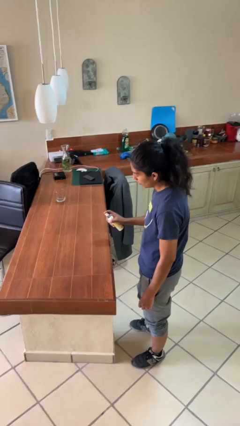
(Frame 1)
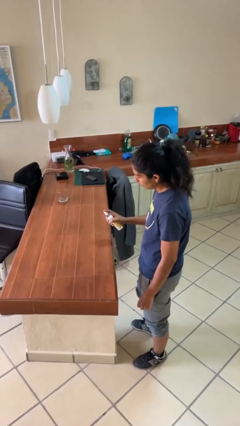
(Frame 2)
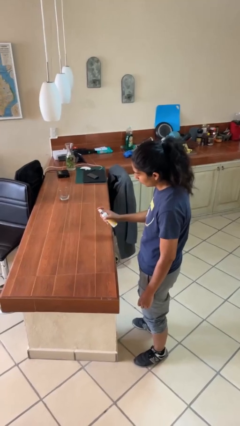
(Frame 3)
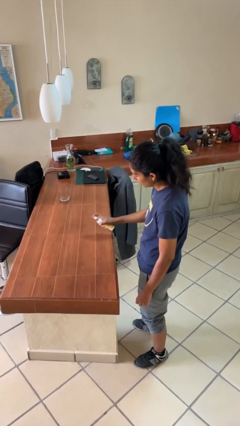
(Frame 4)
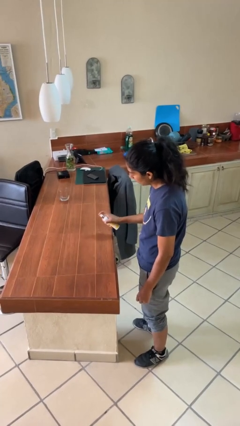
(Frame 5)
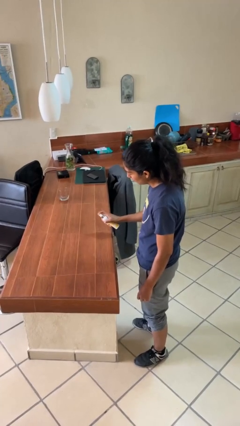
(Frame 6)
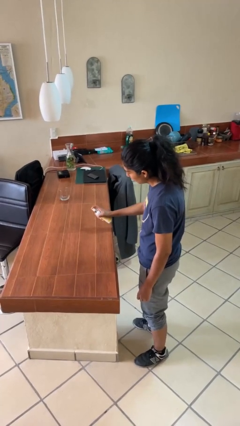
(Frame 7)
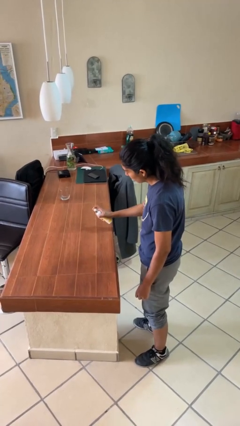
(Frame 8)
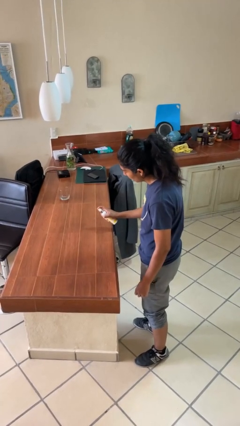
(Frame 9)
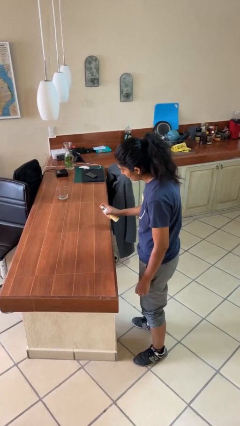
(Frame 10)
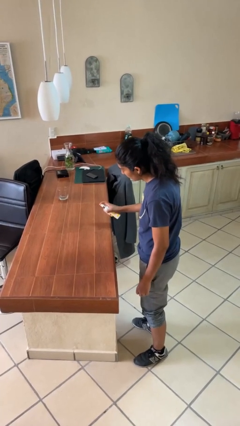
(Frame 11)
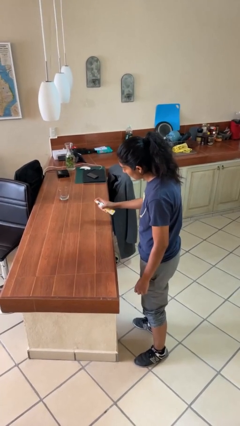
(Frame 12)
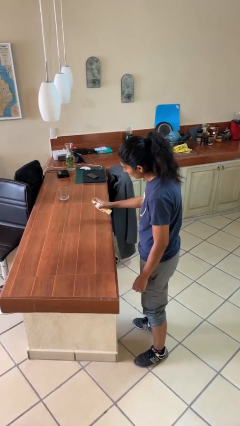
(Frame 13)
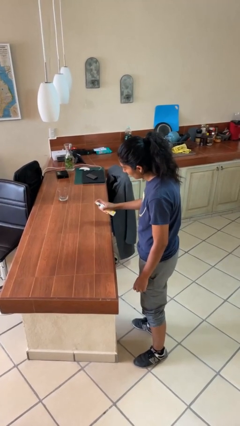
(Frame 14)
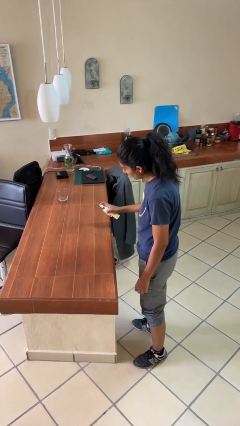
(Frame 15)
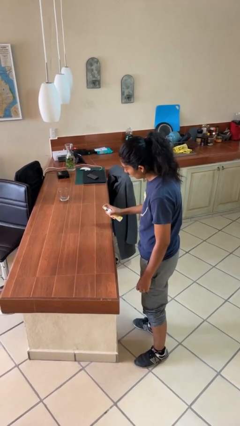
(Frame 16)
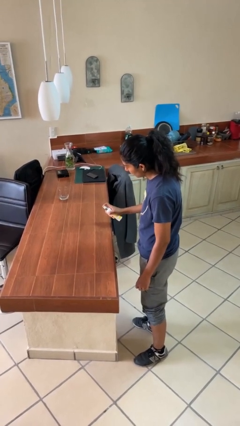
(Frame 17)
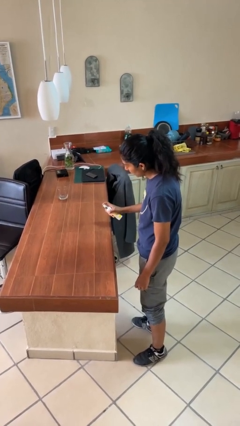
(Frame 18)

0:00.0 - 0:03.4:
person sprays from bottle

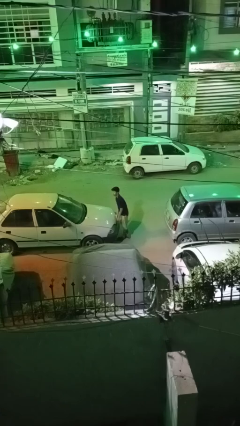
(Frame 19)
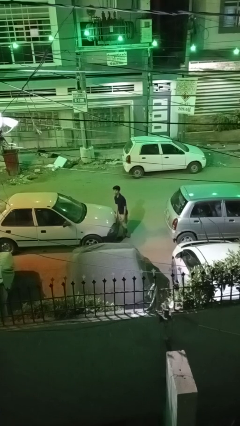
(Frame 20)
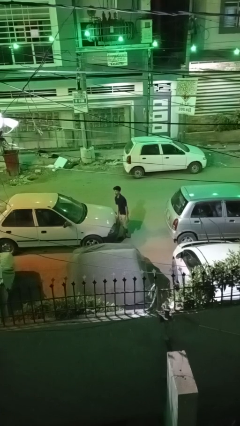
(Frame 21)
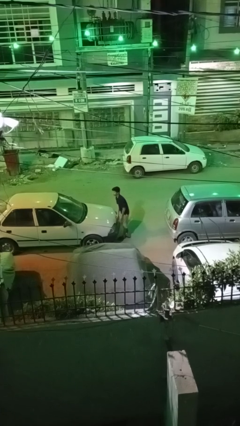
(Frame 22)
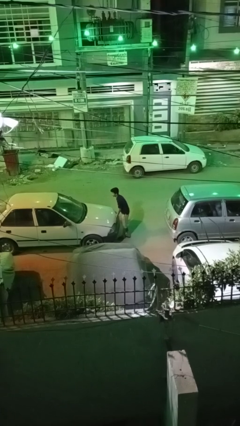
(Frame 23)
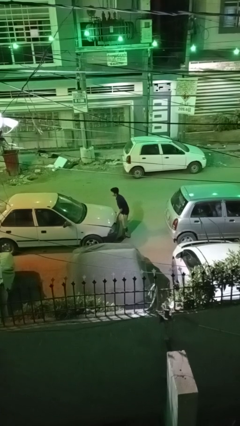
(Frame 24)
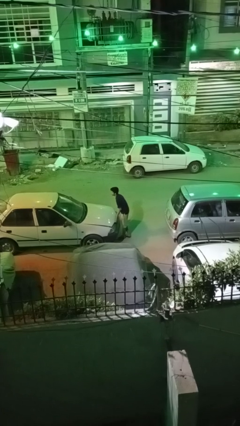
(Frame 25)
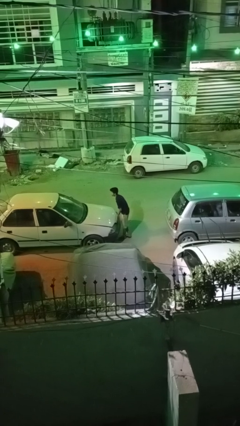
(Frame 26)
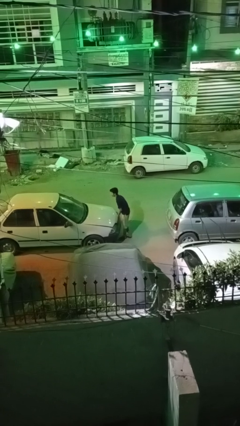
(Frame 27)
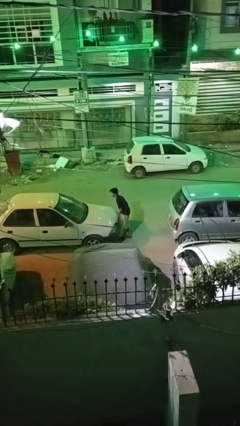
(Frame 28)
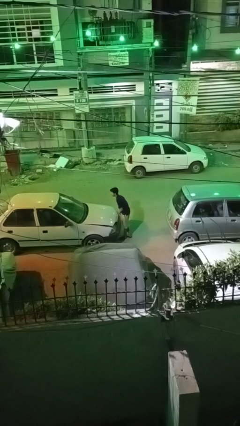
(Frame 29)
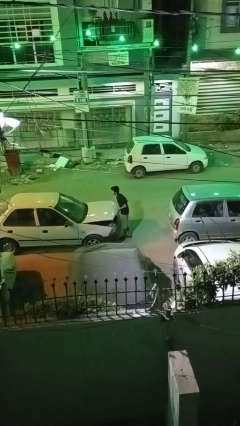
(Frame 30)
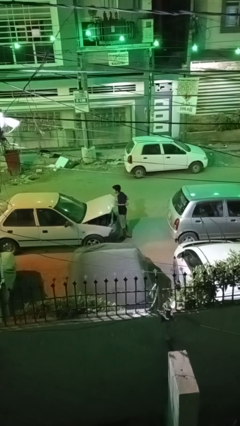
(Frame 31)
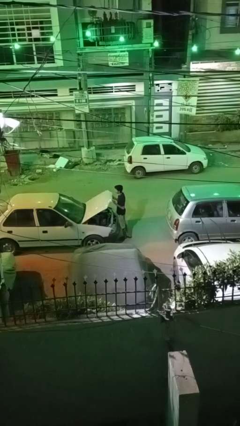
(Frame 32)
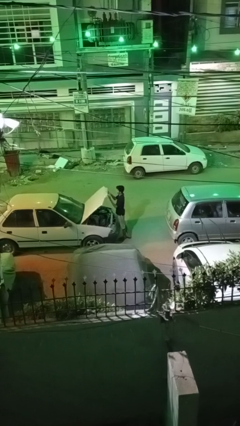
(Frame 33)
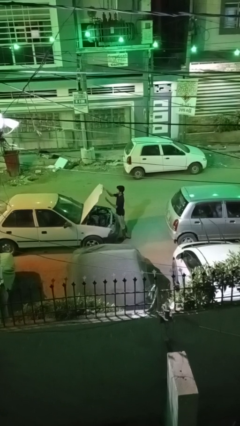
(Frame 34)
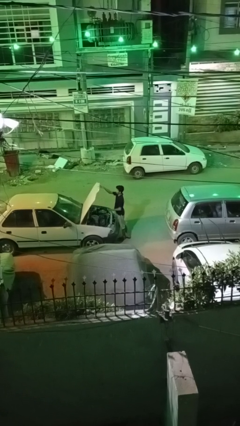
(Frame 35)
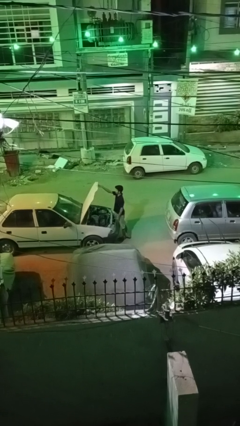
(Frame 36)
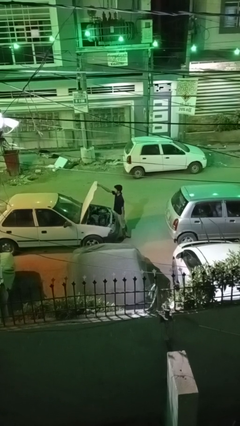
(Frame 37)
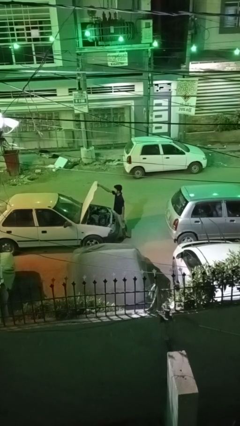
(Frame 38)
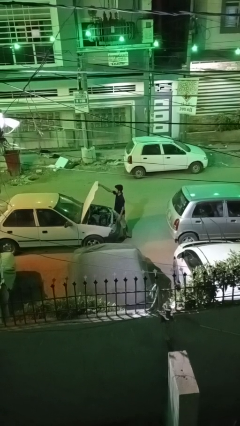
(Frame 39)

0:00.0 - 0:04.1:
person opens car hood

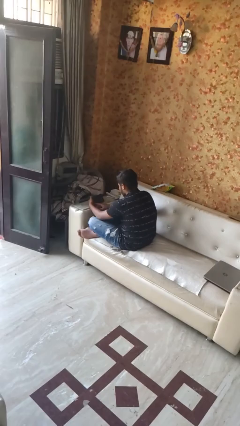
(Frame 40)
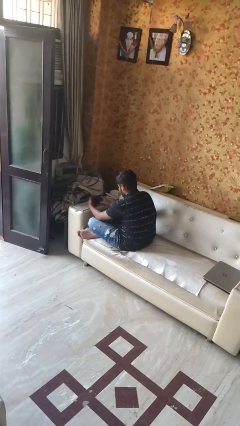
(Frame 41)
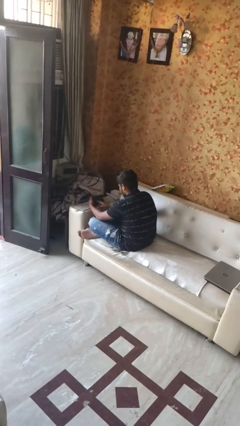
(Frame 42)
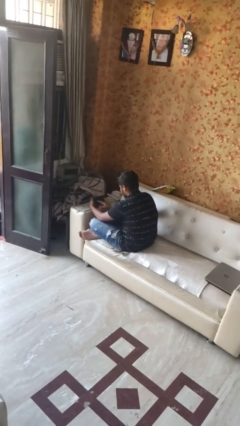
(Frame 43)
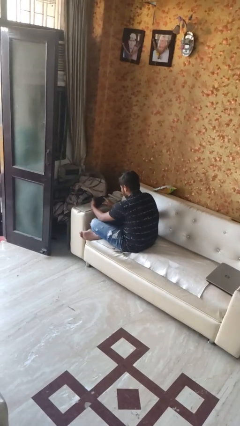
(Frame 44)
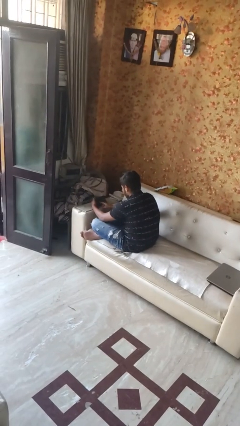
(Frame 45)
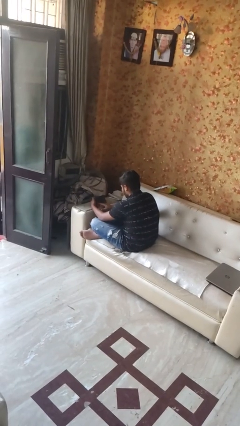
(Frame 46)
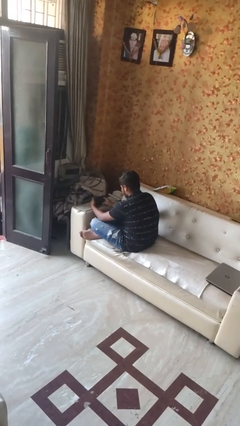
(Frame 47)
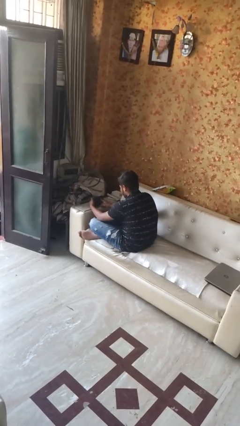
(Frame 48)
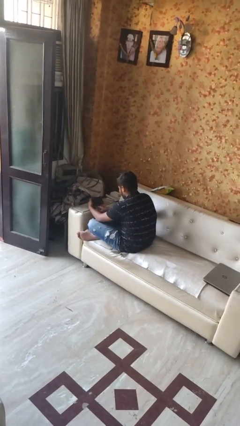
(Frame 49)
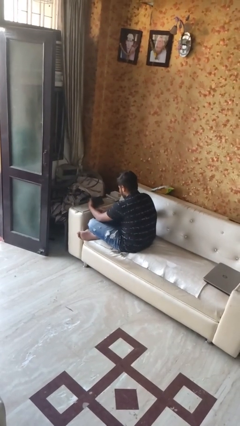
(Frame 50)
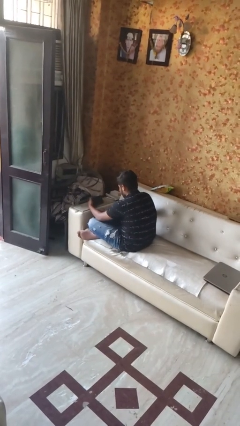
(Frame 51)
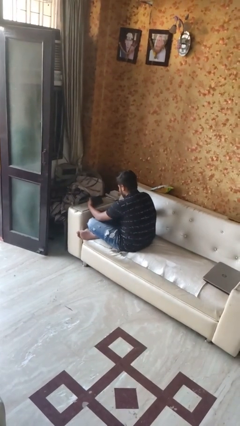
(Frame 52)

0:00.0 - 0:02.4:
person interacts with tablet

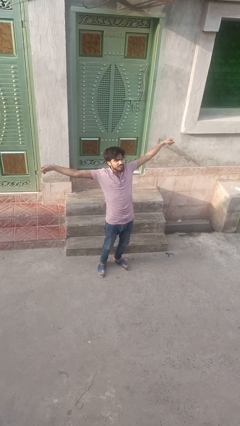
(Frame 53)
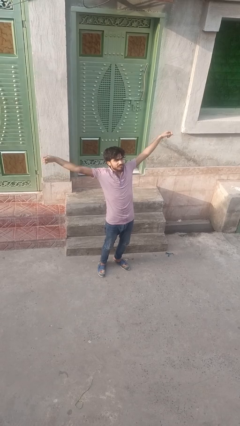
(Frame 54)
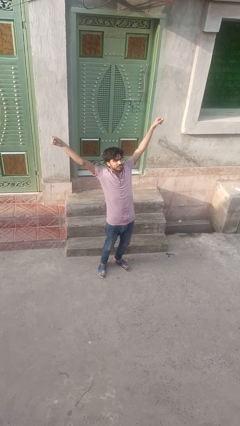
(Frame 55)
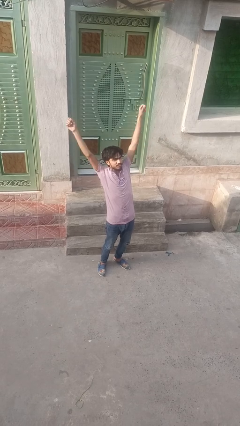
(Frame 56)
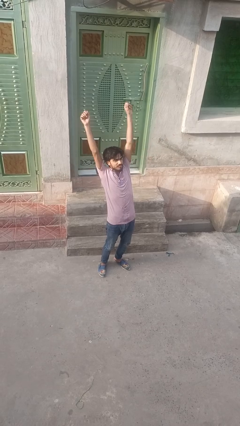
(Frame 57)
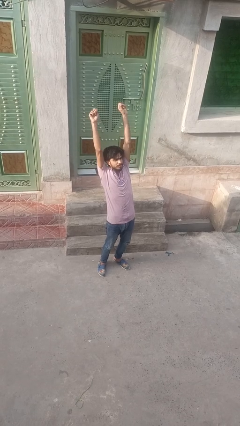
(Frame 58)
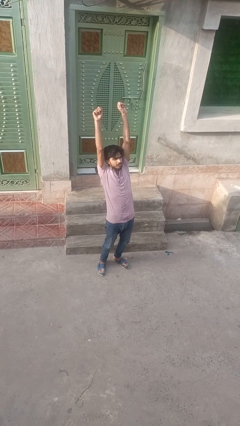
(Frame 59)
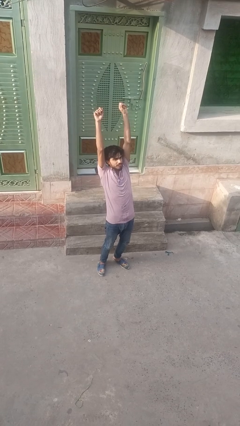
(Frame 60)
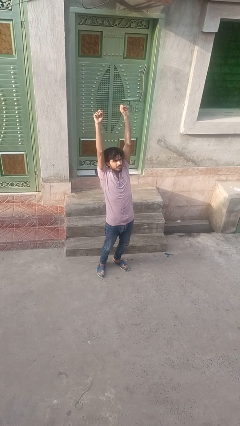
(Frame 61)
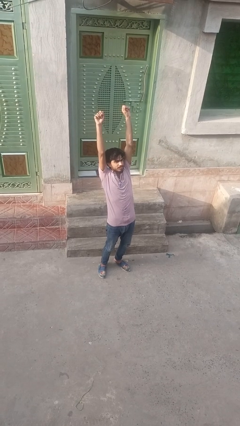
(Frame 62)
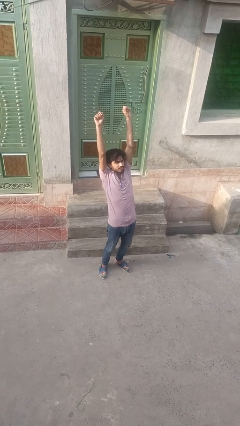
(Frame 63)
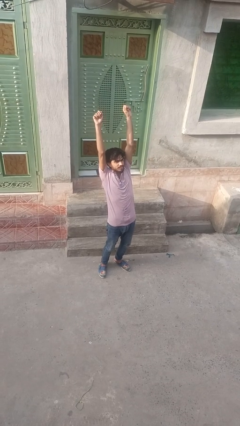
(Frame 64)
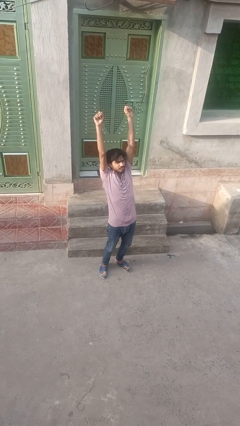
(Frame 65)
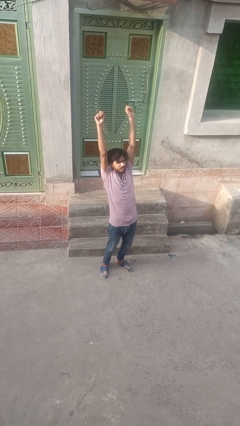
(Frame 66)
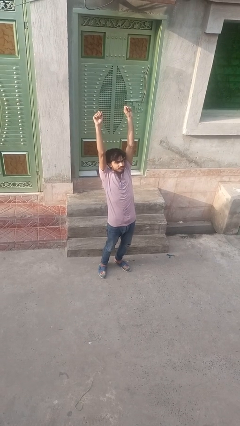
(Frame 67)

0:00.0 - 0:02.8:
person stretches arms over head

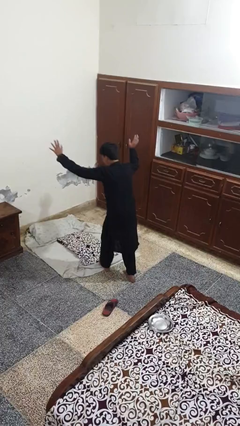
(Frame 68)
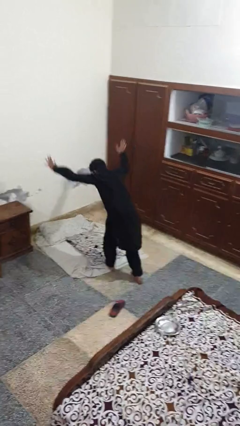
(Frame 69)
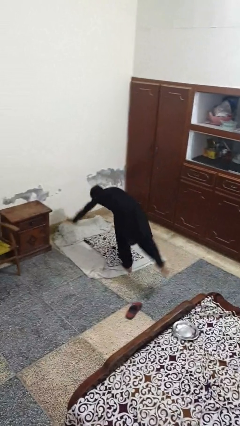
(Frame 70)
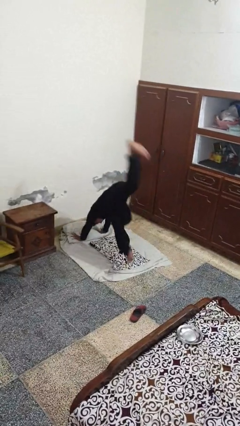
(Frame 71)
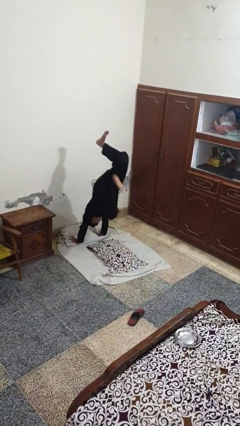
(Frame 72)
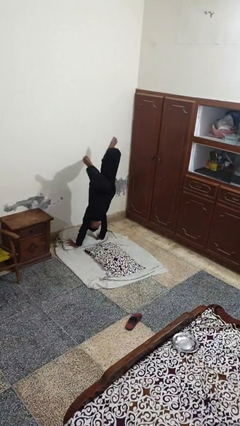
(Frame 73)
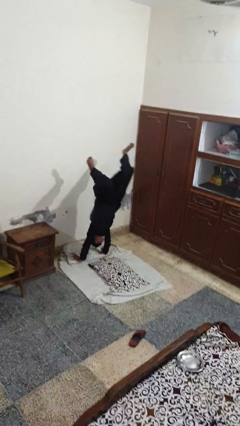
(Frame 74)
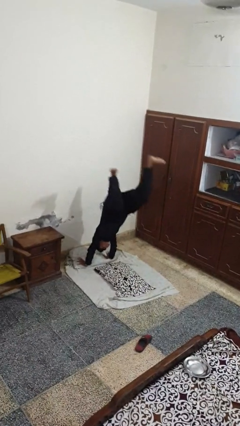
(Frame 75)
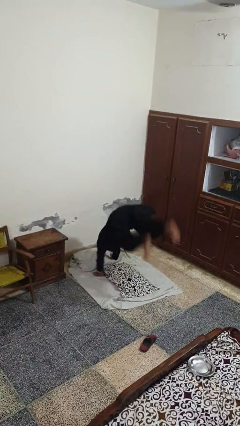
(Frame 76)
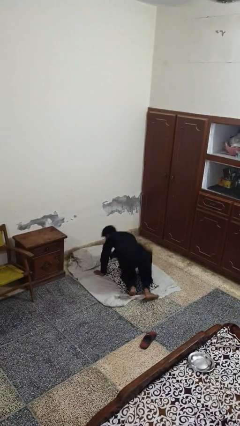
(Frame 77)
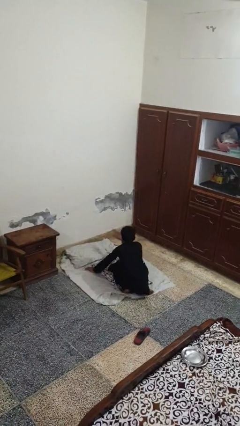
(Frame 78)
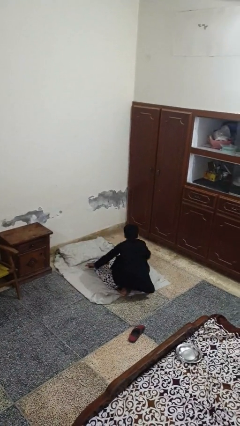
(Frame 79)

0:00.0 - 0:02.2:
person handstand

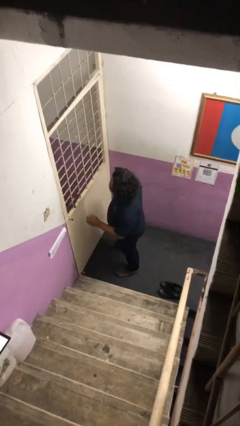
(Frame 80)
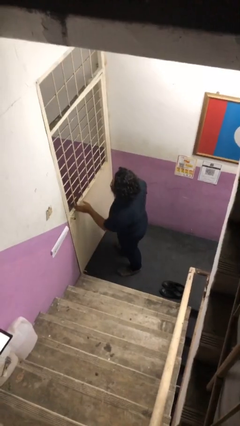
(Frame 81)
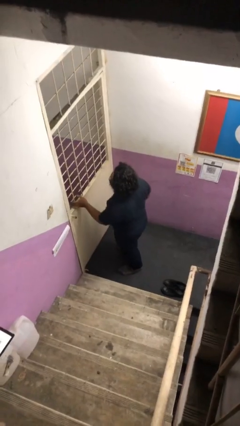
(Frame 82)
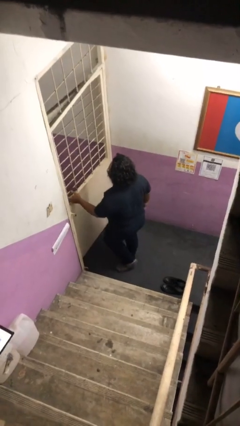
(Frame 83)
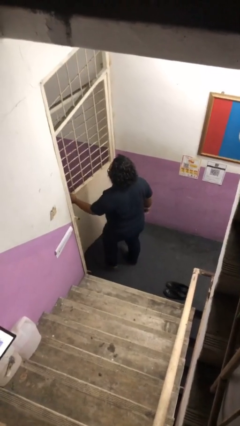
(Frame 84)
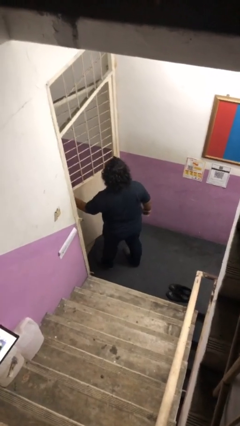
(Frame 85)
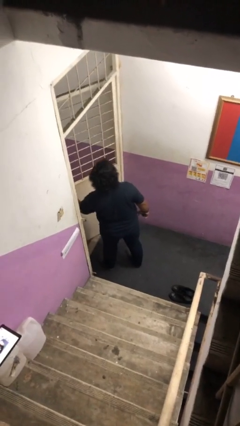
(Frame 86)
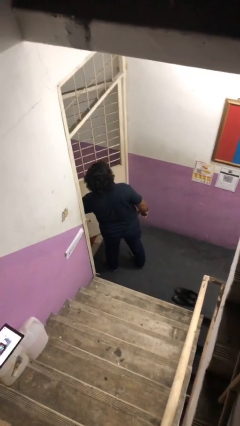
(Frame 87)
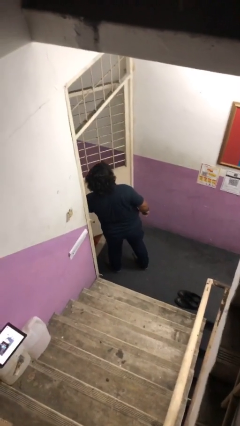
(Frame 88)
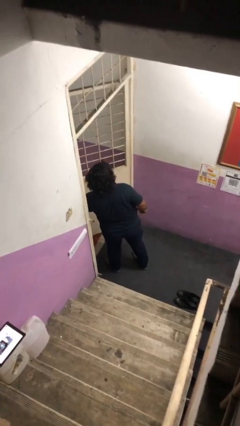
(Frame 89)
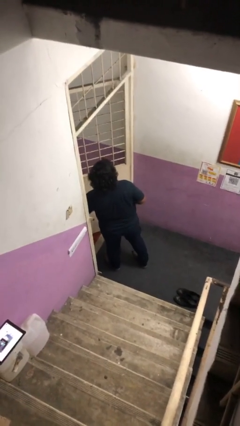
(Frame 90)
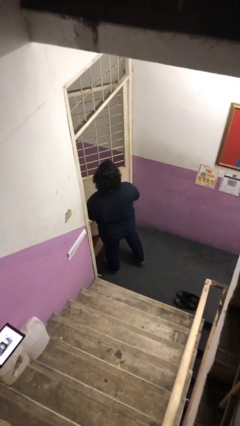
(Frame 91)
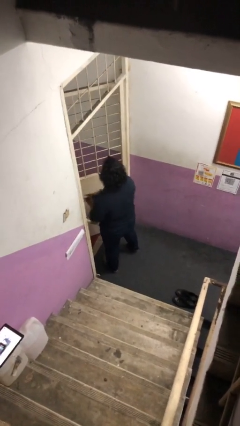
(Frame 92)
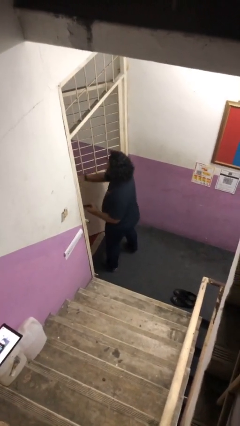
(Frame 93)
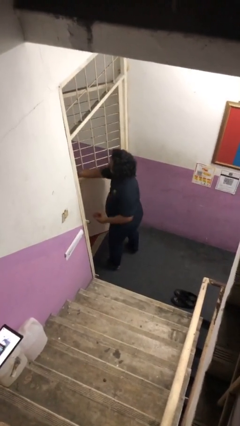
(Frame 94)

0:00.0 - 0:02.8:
person opens facility door
